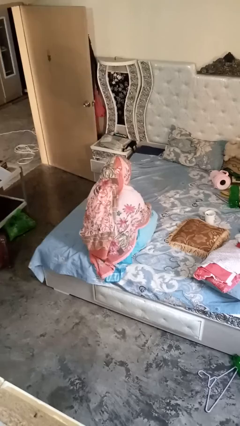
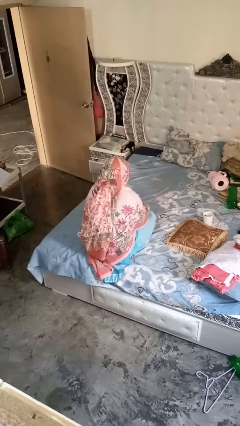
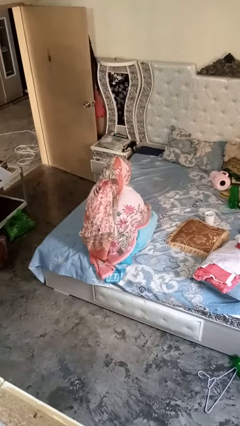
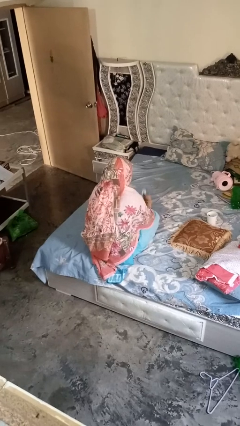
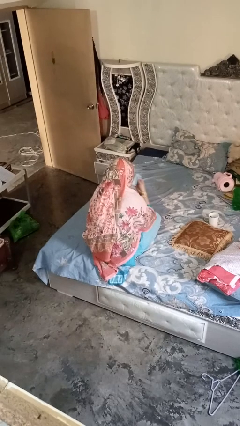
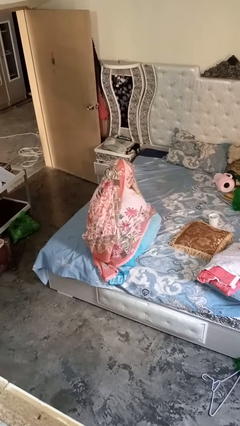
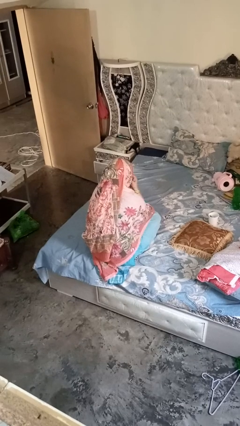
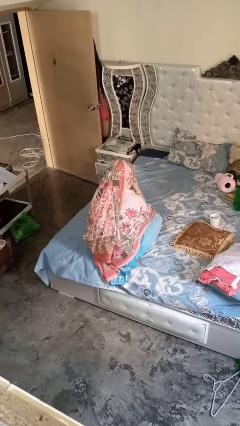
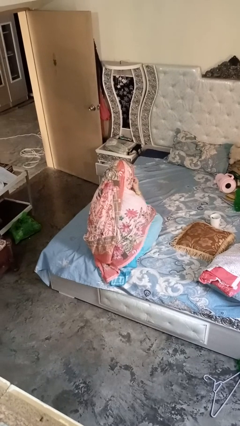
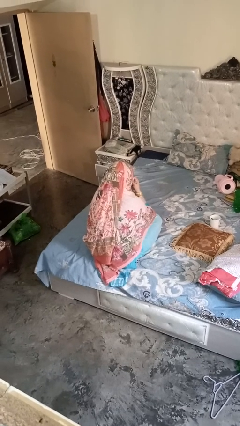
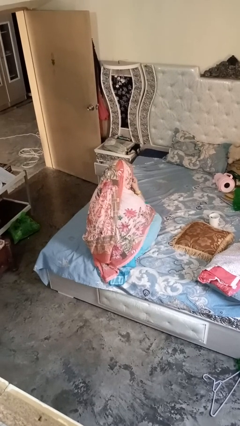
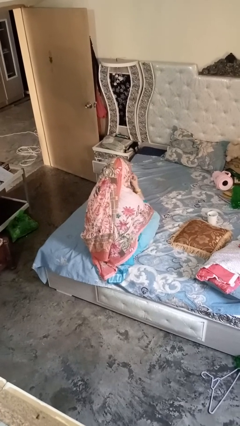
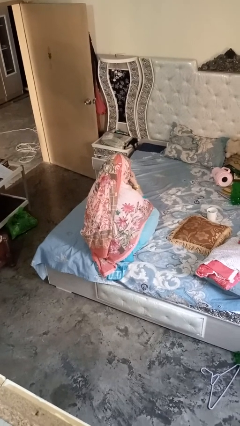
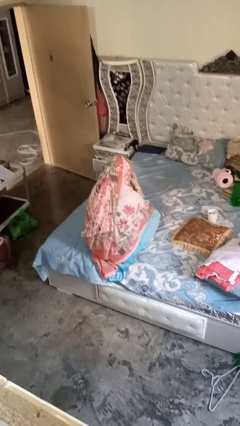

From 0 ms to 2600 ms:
person blows nose

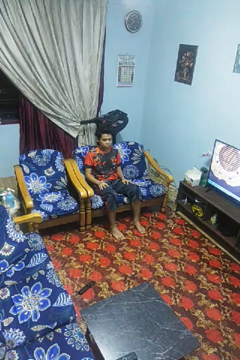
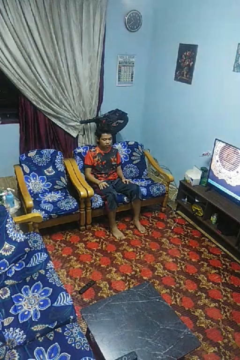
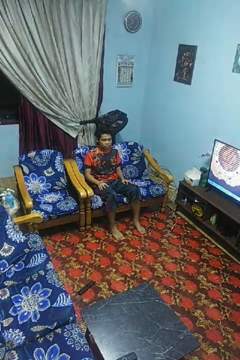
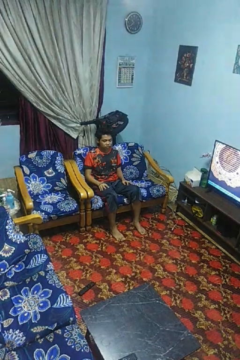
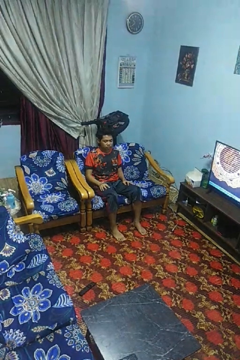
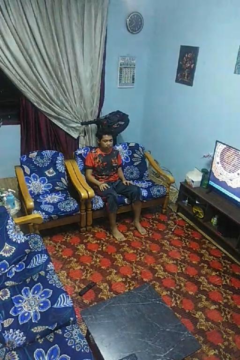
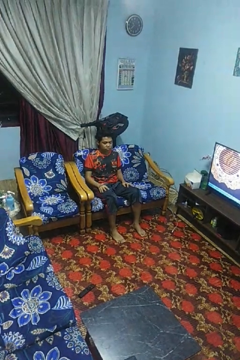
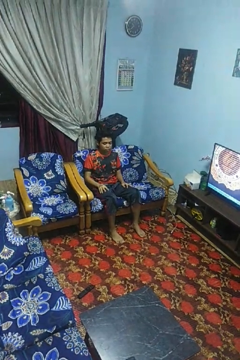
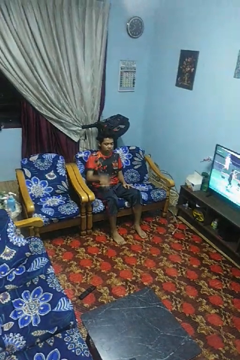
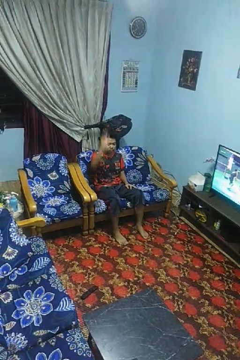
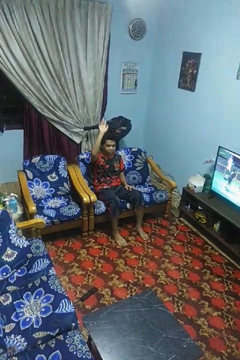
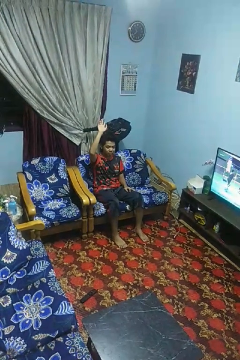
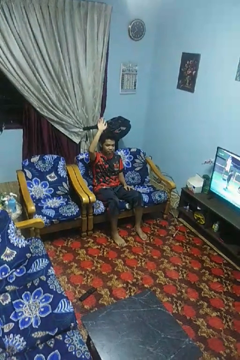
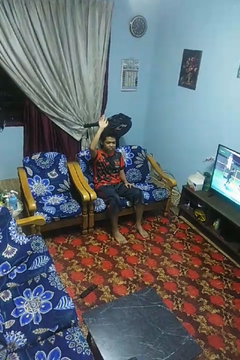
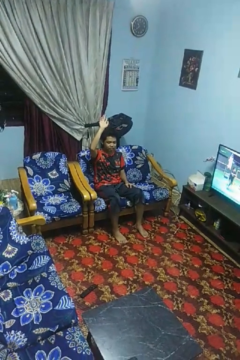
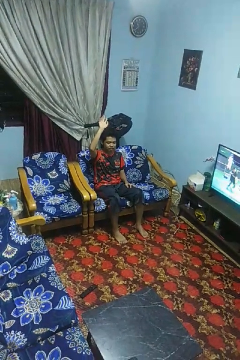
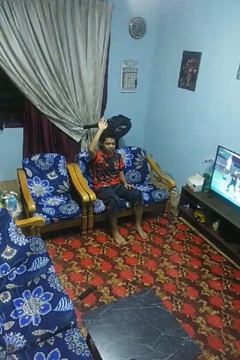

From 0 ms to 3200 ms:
person gestures raise hand

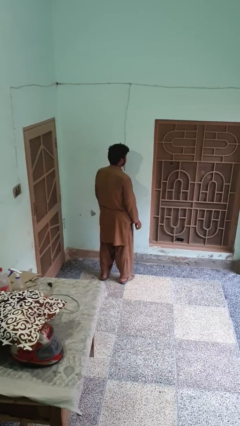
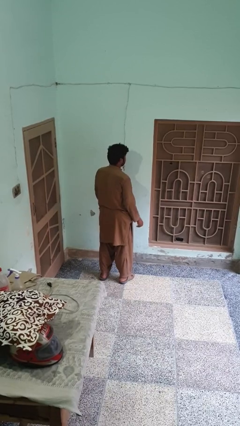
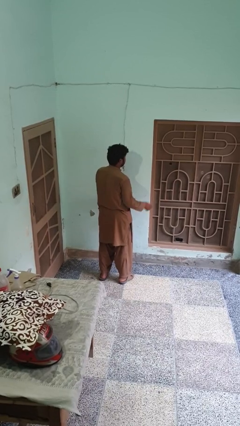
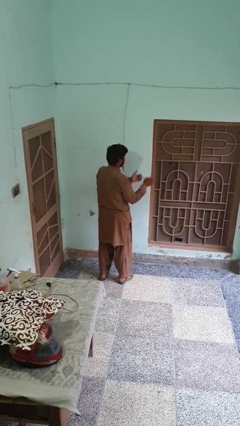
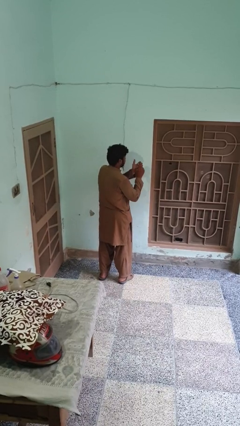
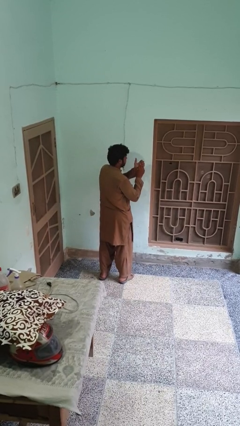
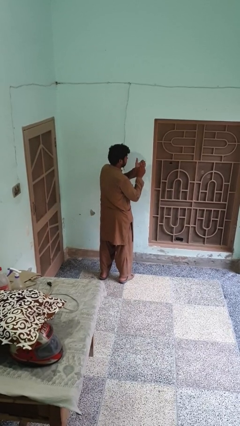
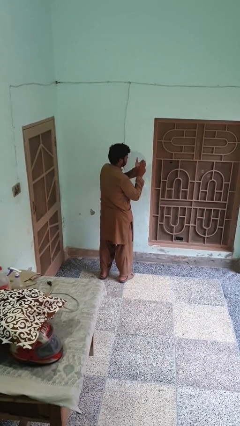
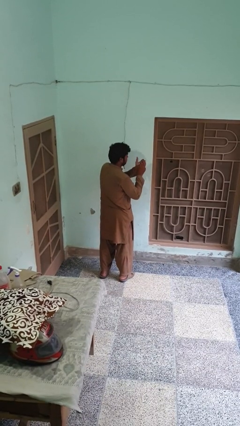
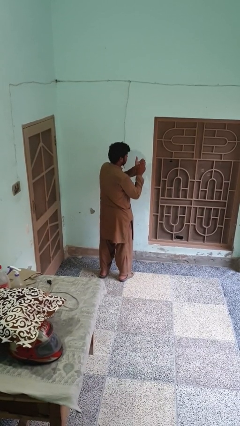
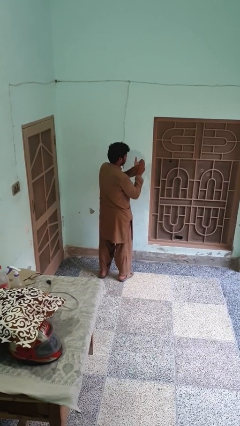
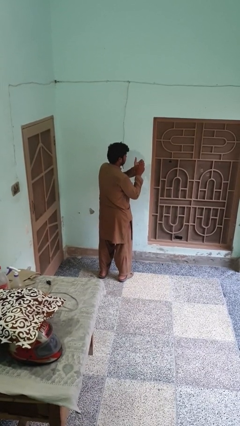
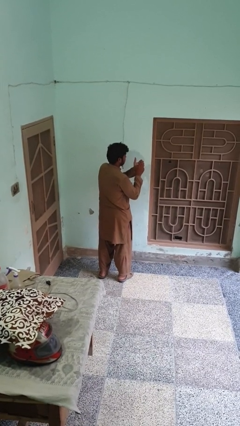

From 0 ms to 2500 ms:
person paints fingernails

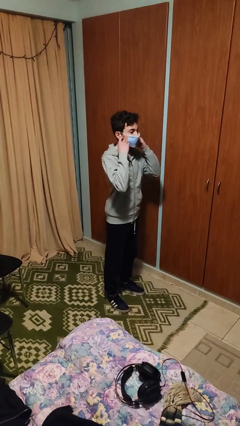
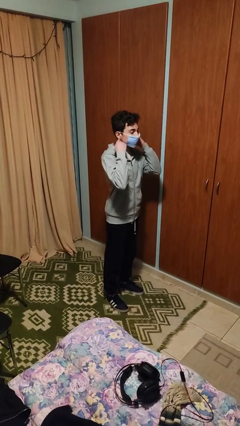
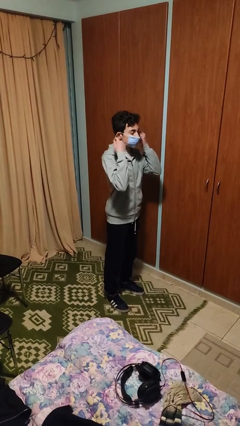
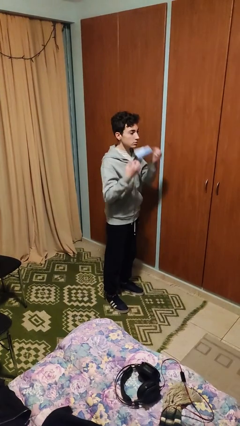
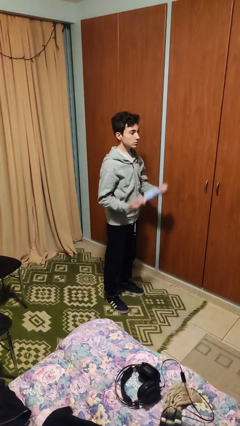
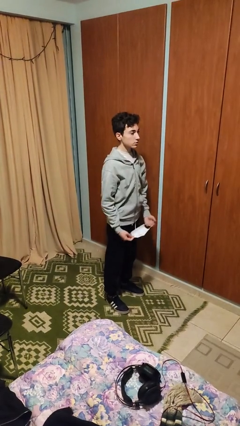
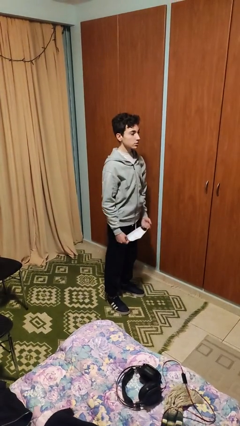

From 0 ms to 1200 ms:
person takes off facemask

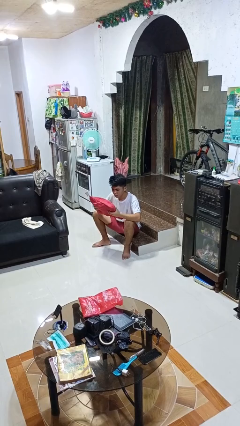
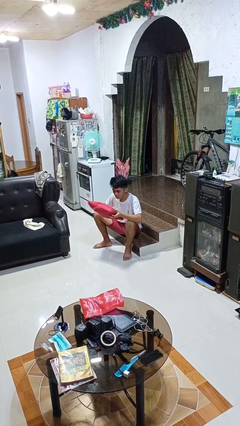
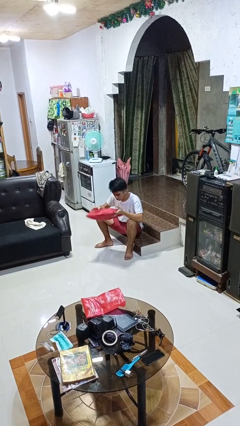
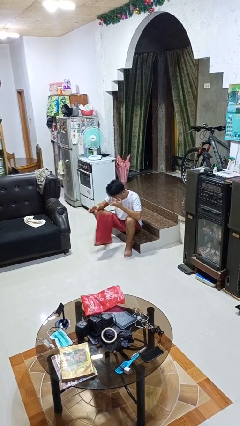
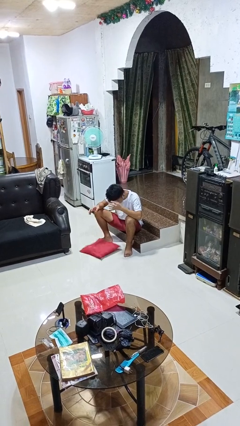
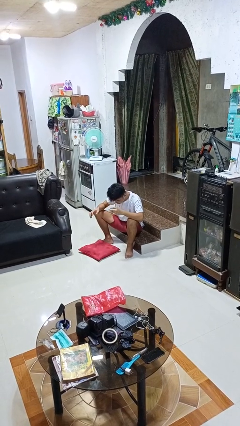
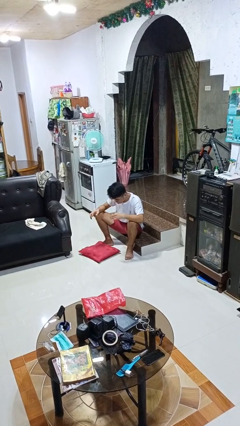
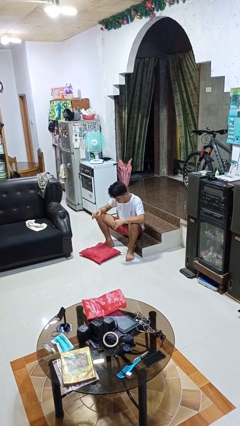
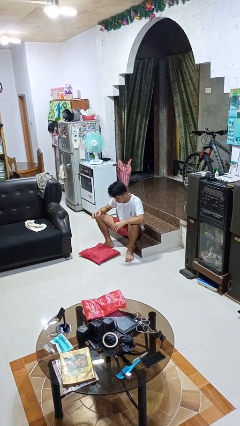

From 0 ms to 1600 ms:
person drops object

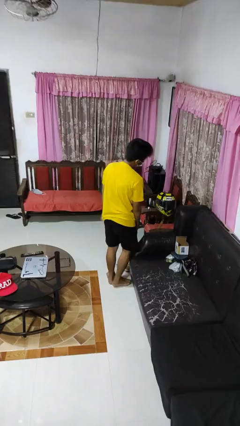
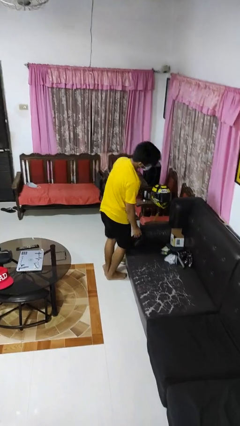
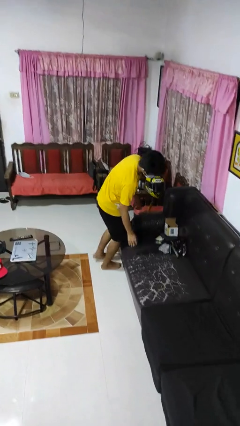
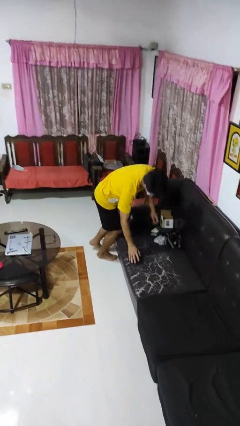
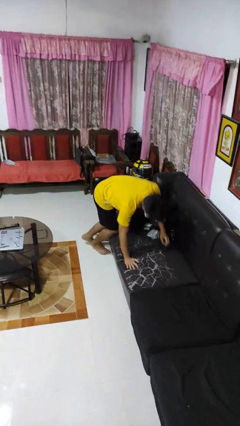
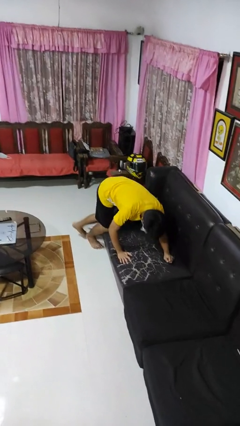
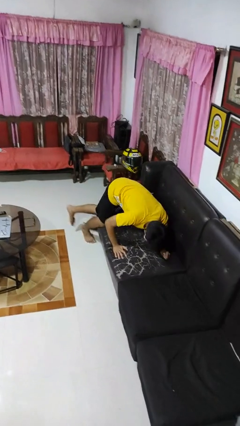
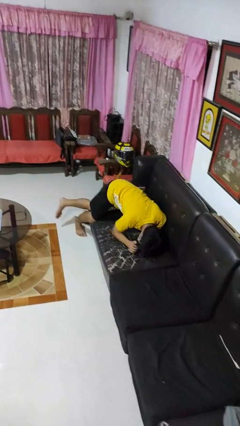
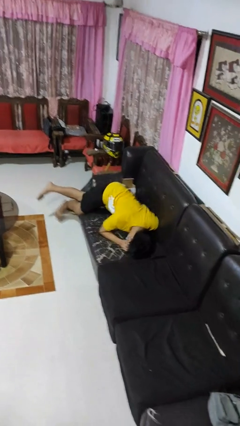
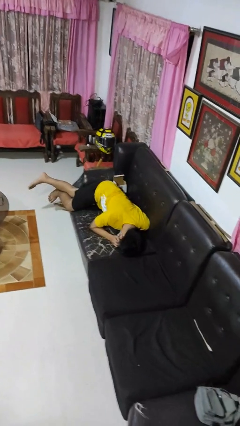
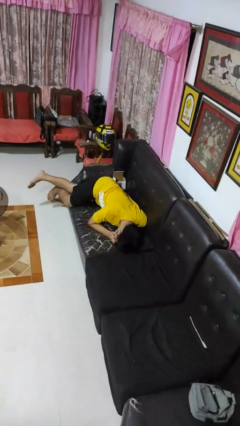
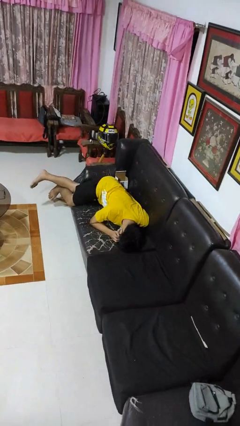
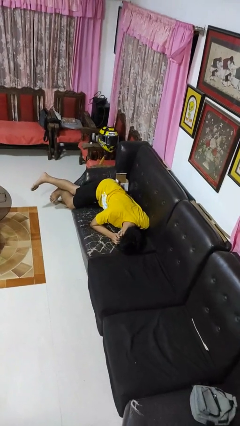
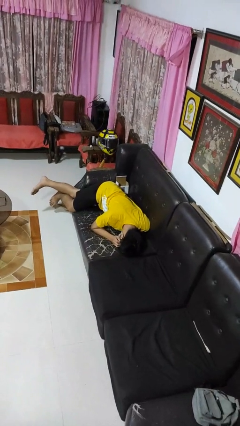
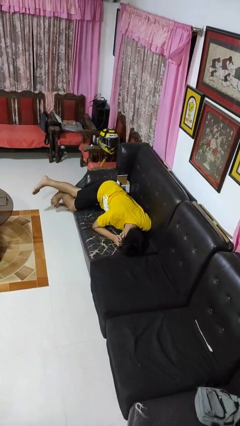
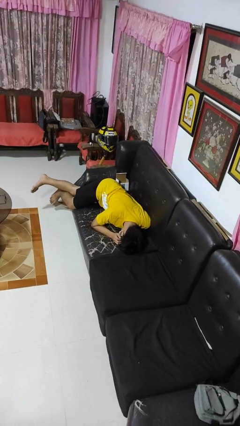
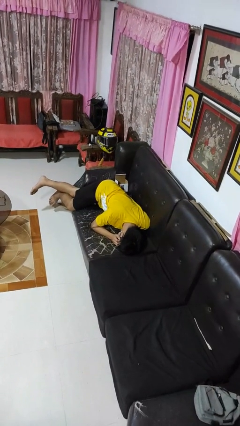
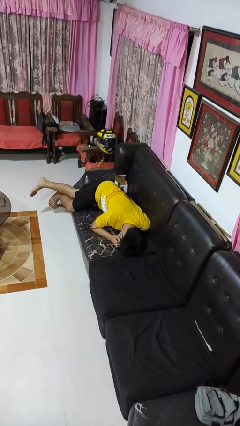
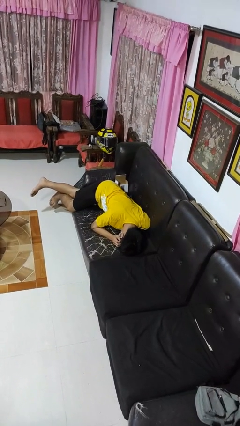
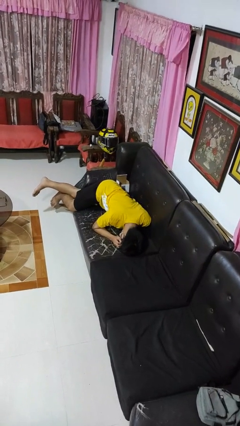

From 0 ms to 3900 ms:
person lies down on couch

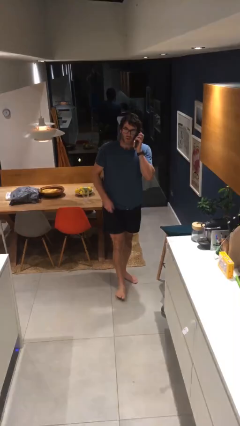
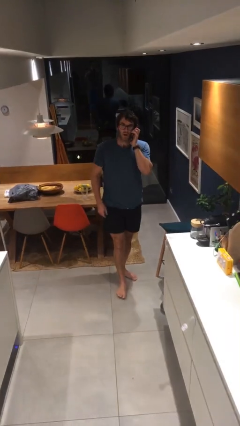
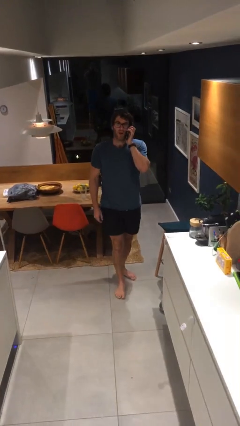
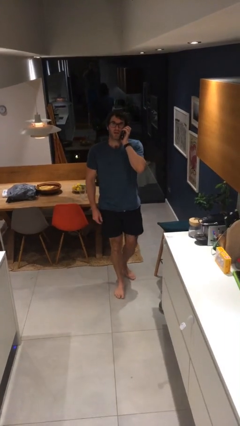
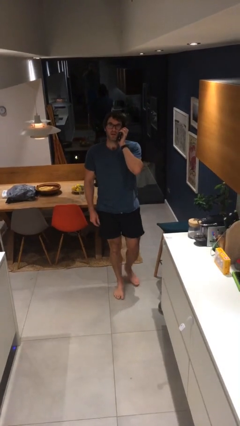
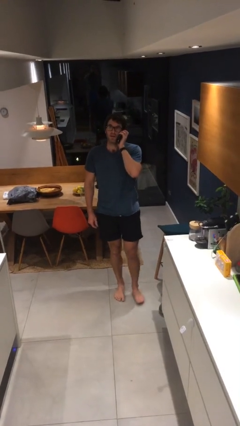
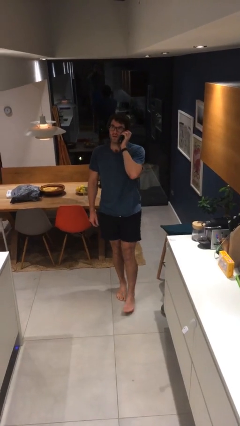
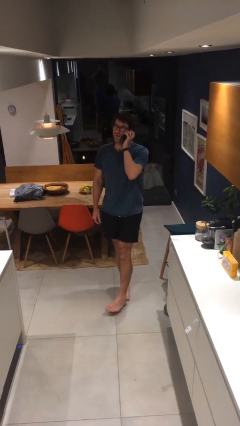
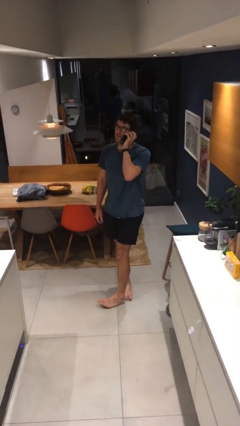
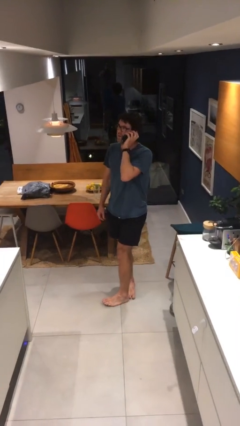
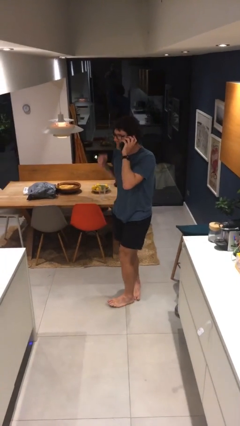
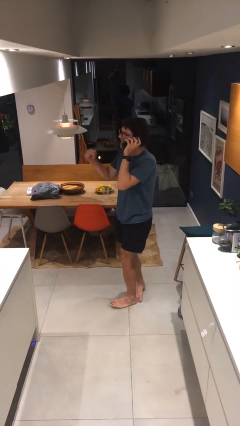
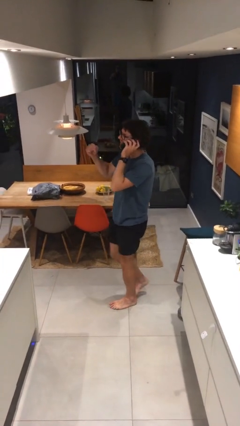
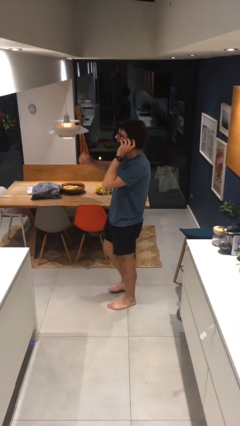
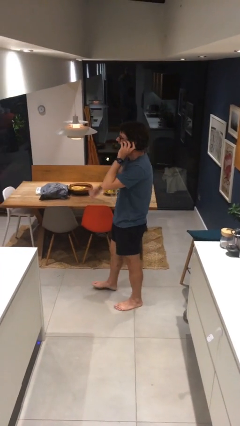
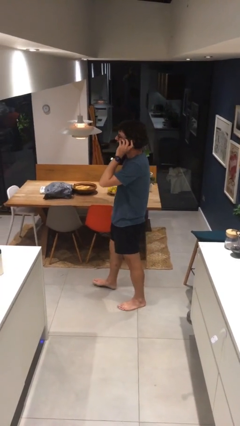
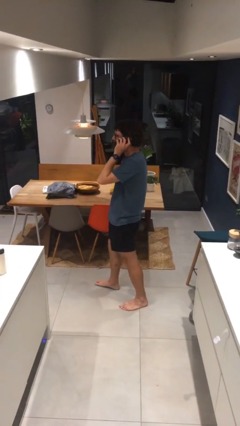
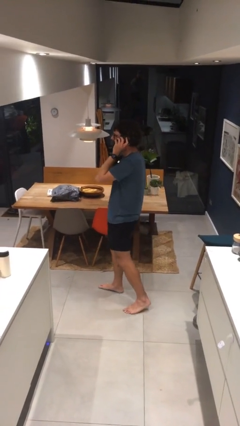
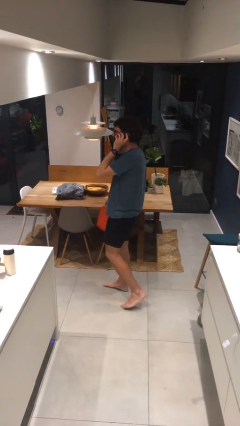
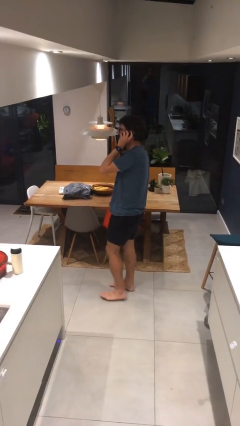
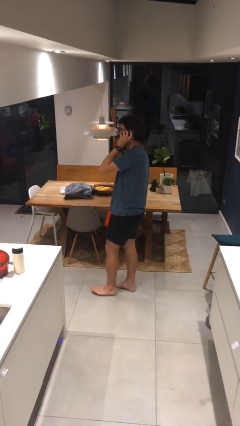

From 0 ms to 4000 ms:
person talks on phone
